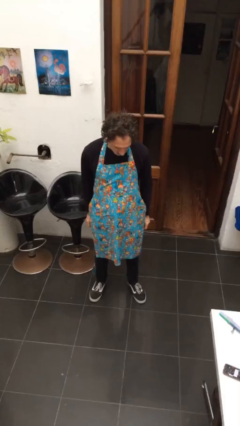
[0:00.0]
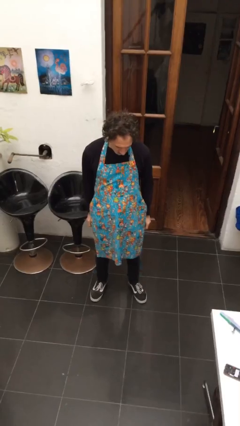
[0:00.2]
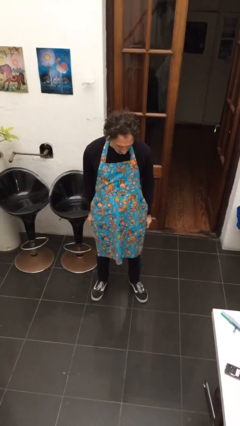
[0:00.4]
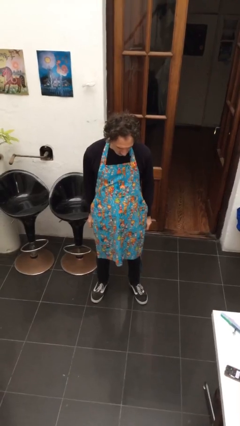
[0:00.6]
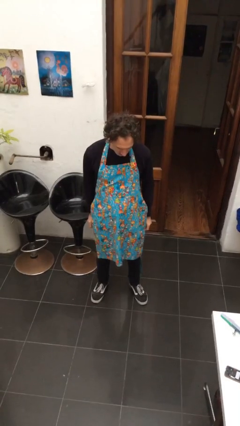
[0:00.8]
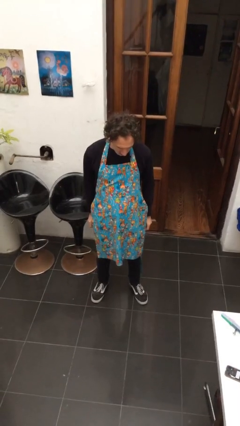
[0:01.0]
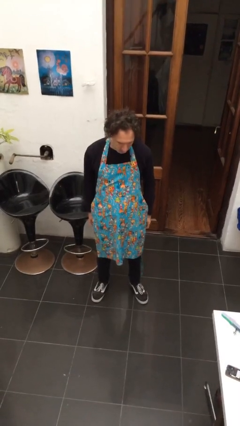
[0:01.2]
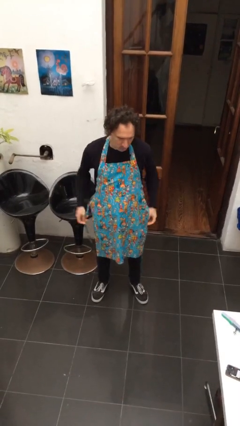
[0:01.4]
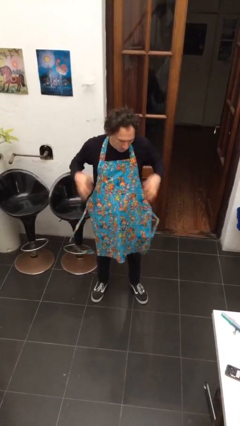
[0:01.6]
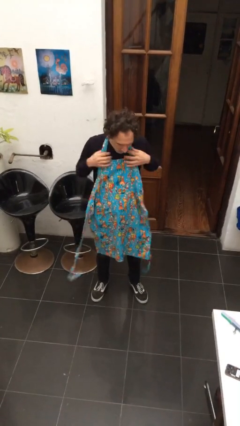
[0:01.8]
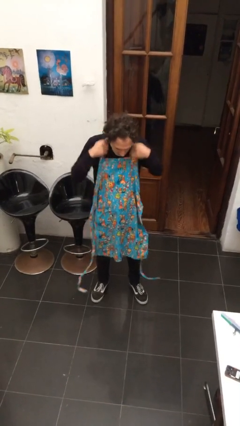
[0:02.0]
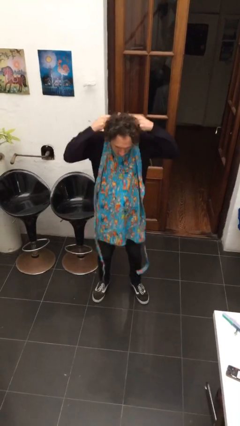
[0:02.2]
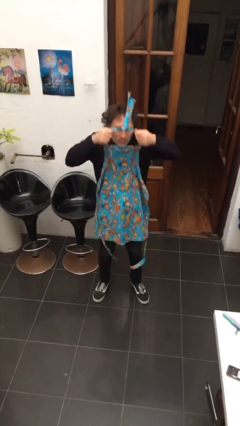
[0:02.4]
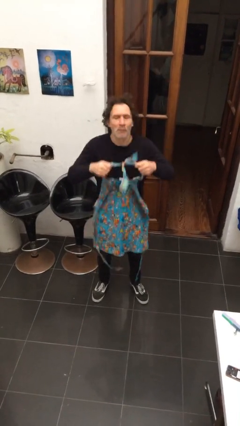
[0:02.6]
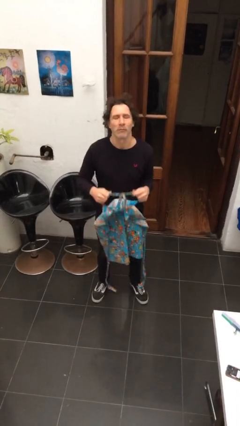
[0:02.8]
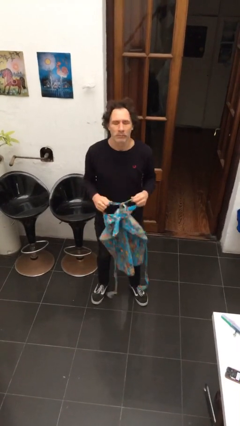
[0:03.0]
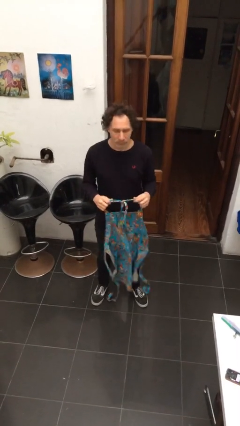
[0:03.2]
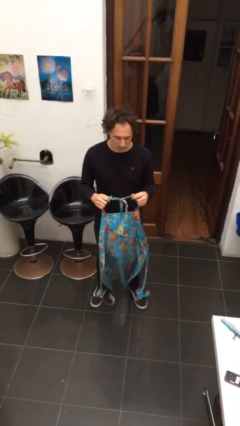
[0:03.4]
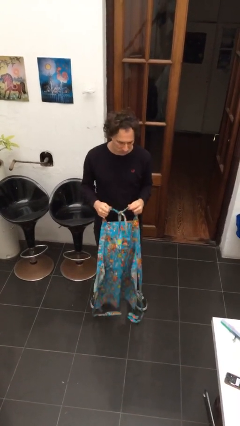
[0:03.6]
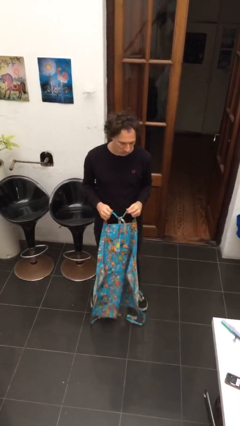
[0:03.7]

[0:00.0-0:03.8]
person takes off apron

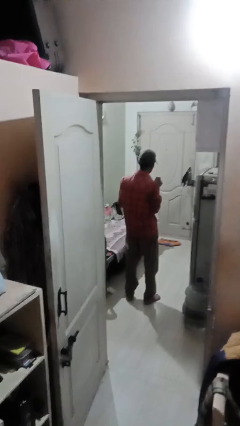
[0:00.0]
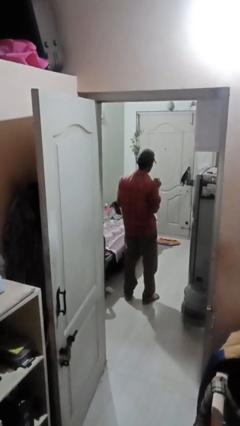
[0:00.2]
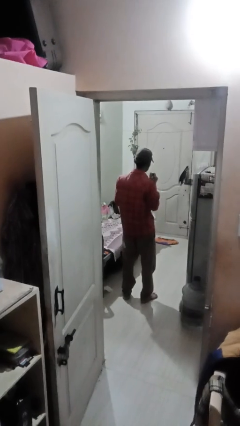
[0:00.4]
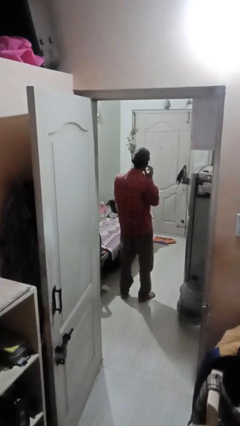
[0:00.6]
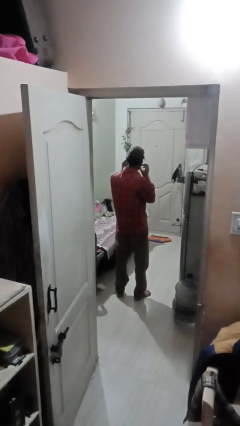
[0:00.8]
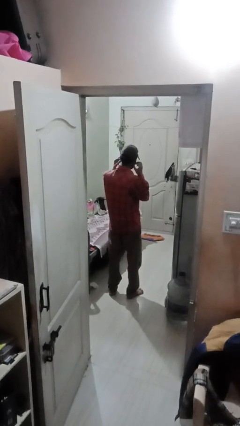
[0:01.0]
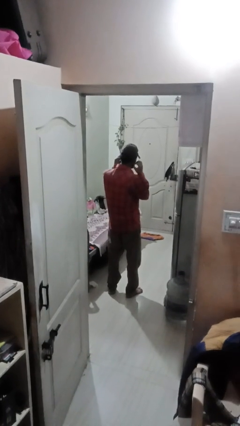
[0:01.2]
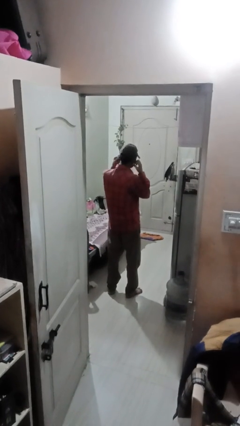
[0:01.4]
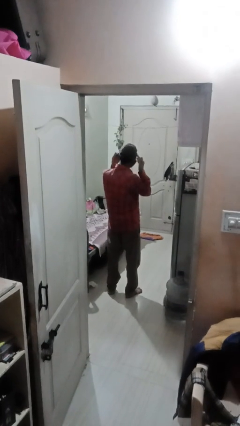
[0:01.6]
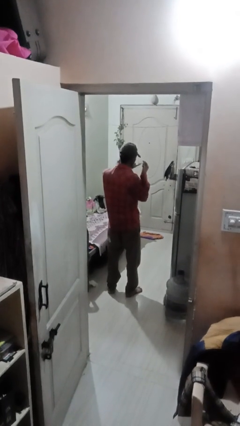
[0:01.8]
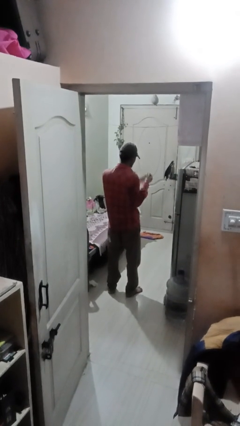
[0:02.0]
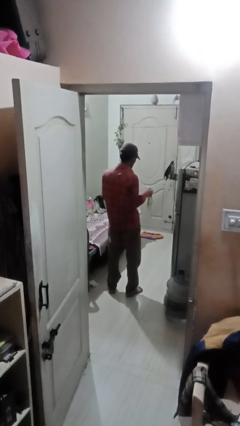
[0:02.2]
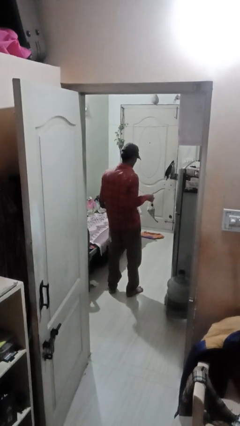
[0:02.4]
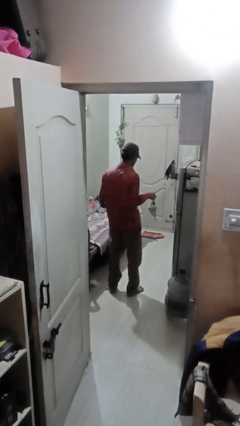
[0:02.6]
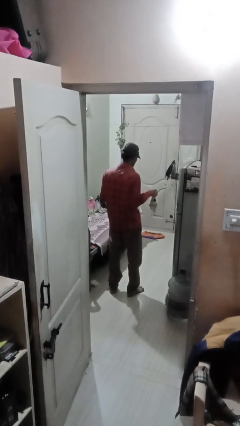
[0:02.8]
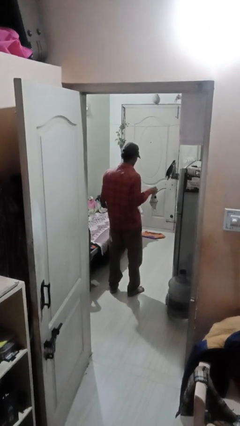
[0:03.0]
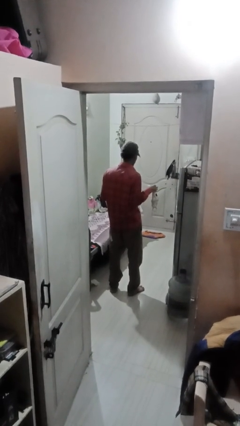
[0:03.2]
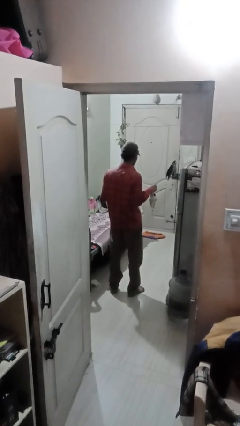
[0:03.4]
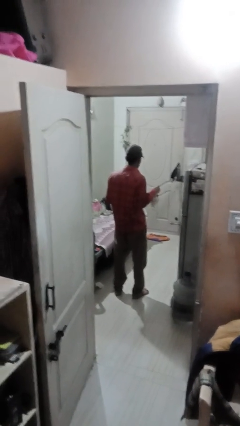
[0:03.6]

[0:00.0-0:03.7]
person takes off facemask

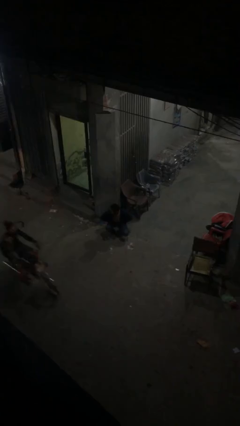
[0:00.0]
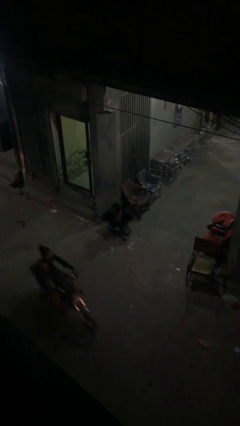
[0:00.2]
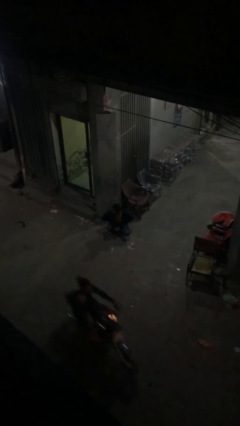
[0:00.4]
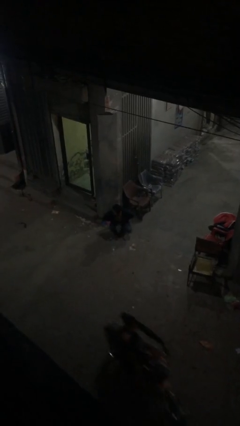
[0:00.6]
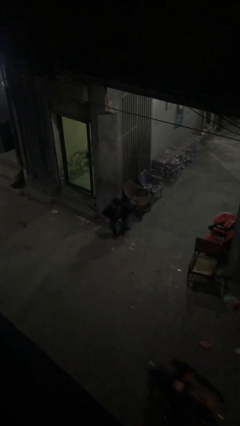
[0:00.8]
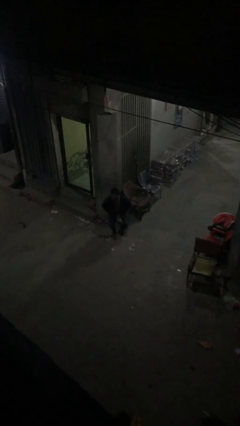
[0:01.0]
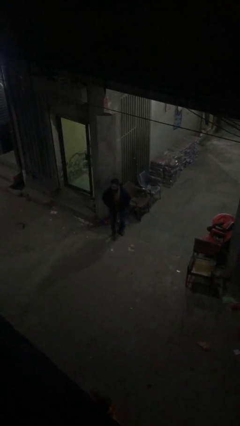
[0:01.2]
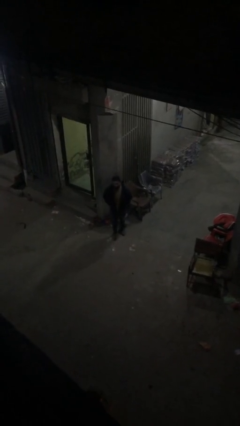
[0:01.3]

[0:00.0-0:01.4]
person stands up

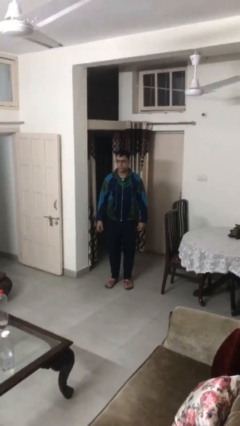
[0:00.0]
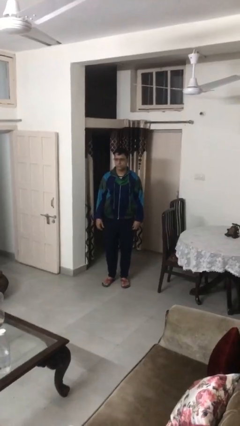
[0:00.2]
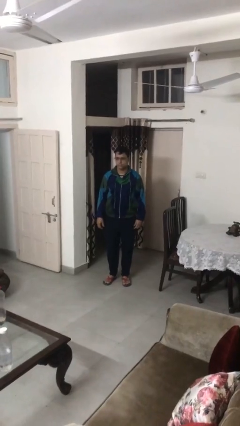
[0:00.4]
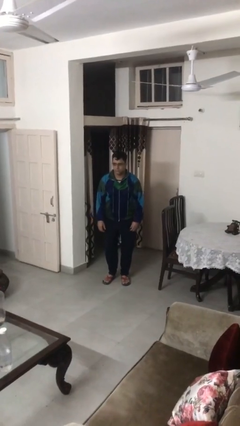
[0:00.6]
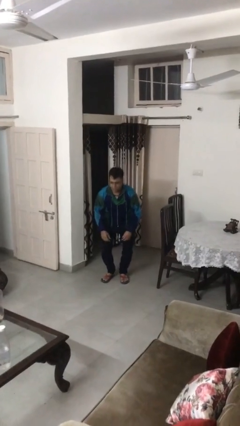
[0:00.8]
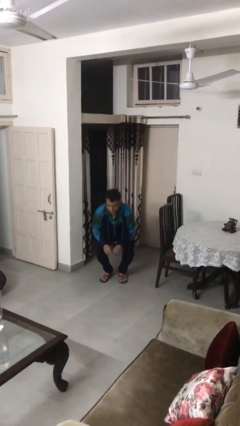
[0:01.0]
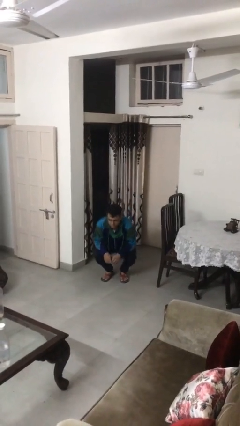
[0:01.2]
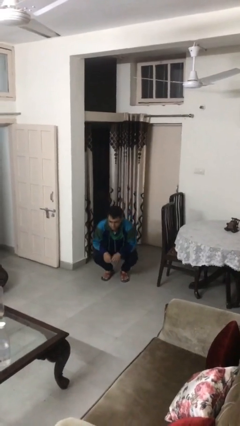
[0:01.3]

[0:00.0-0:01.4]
person sits down

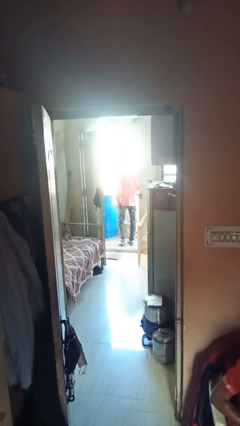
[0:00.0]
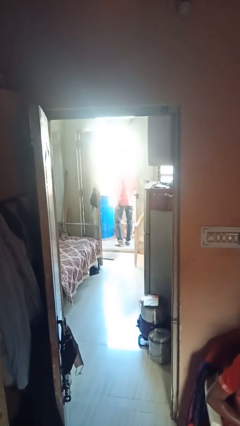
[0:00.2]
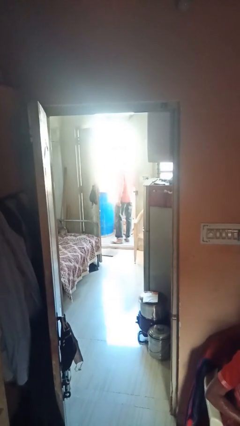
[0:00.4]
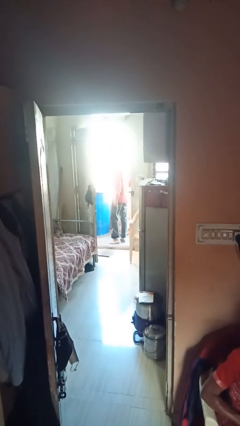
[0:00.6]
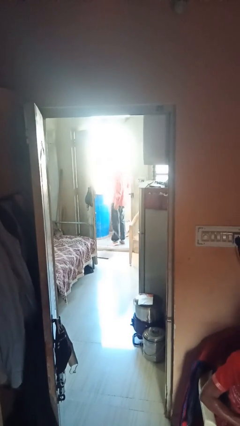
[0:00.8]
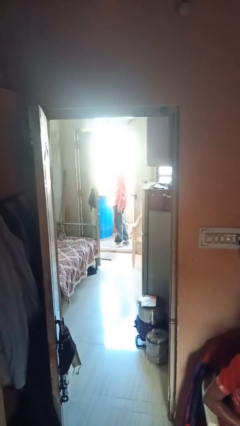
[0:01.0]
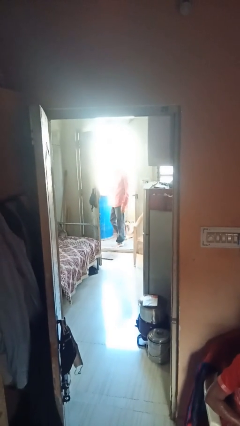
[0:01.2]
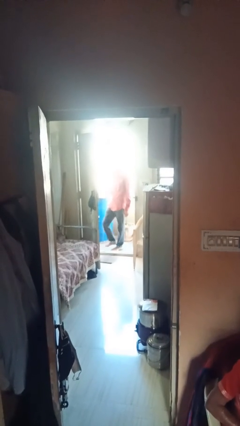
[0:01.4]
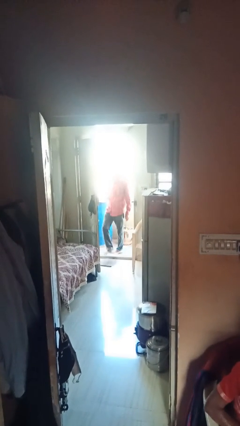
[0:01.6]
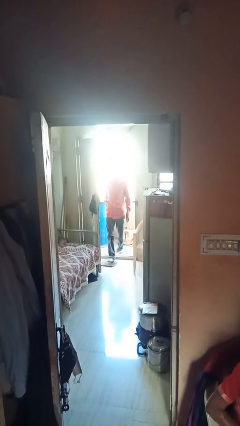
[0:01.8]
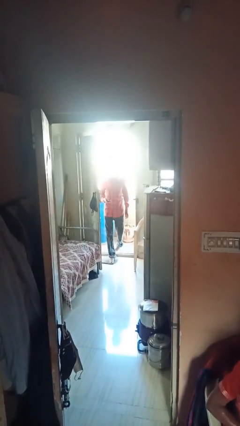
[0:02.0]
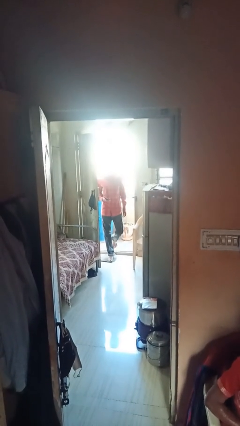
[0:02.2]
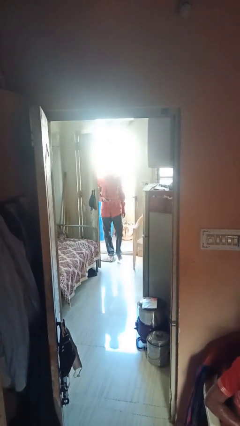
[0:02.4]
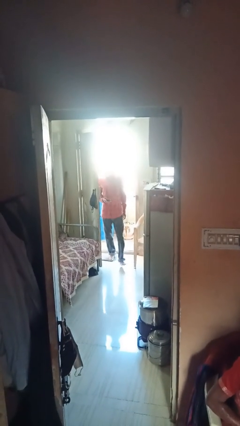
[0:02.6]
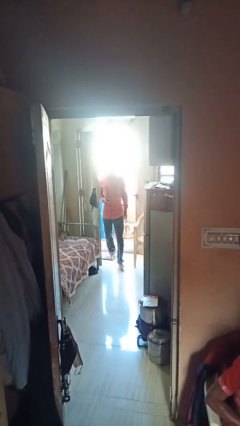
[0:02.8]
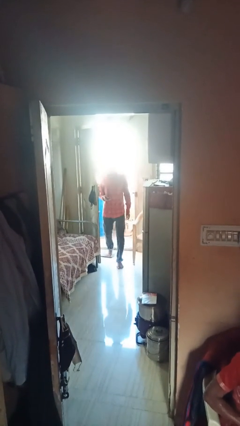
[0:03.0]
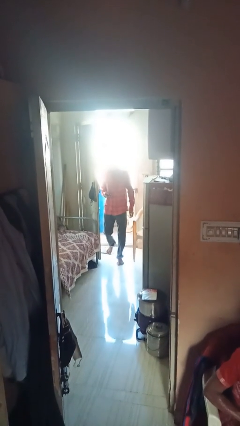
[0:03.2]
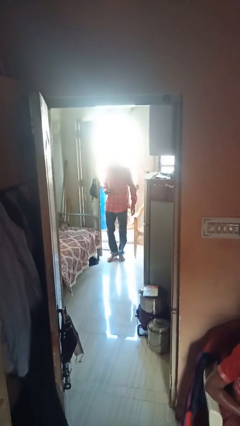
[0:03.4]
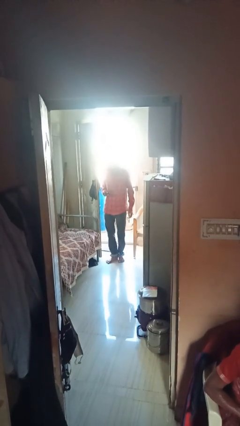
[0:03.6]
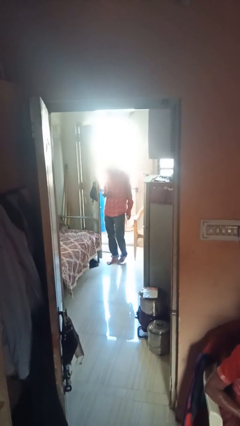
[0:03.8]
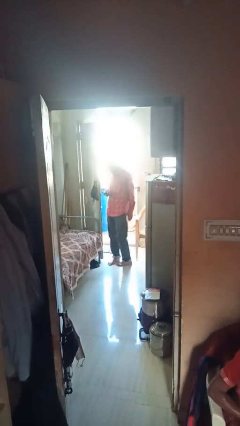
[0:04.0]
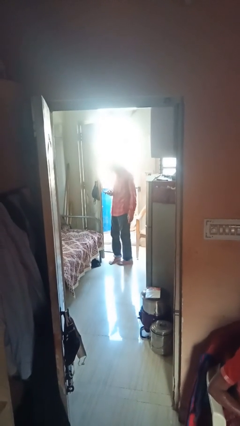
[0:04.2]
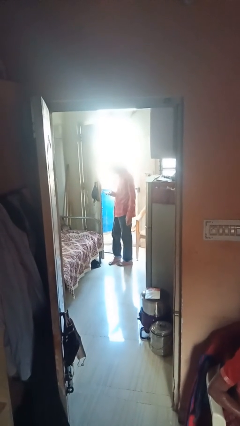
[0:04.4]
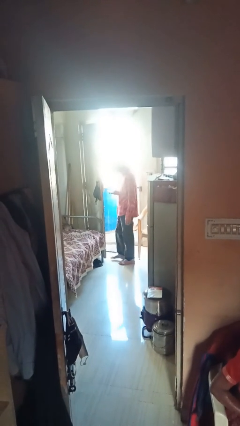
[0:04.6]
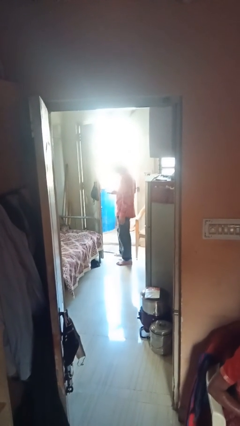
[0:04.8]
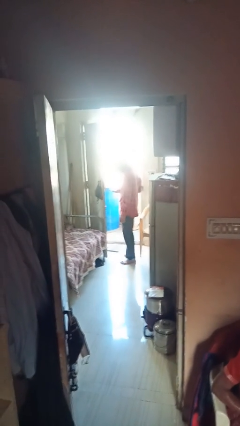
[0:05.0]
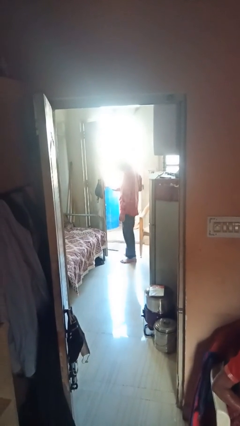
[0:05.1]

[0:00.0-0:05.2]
person enters scene through structure

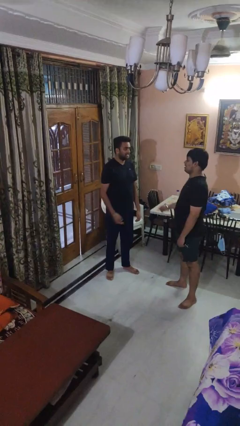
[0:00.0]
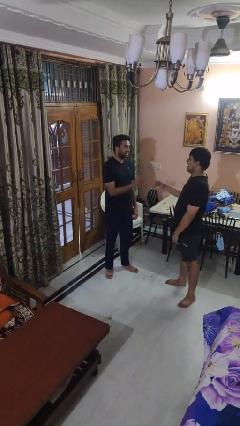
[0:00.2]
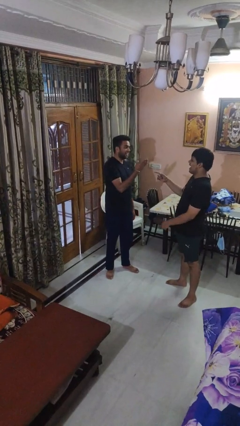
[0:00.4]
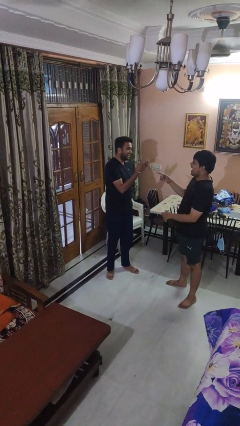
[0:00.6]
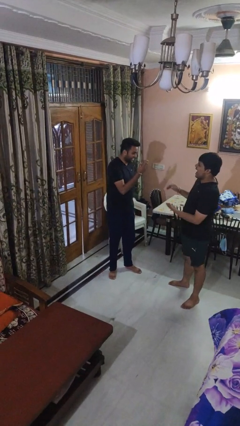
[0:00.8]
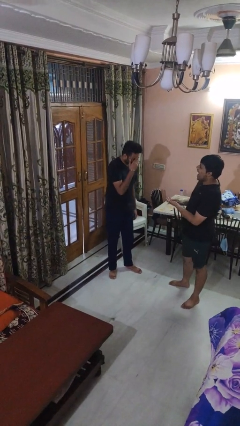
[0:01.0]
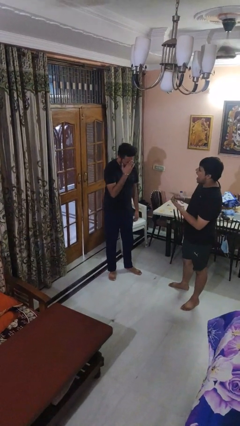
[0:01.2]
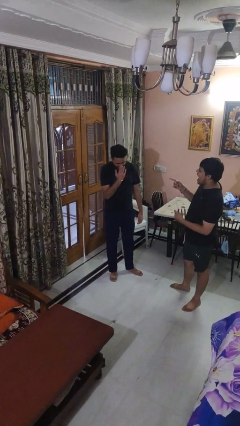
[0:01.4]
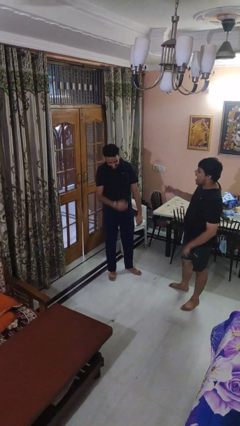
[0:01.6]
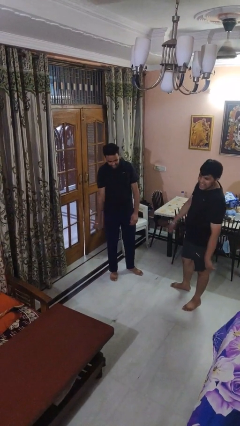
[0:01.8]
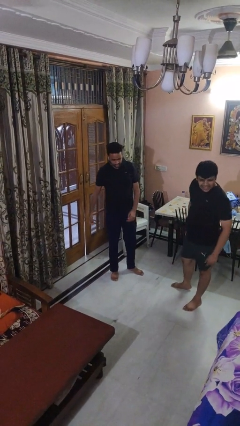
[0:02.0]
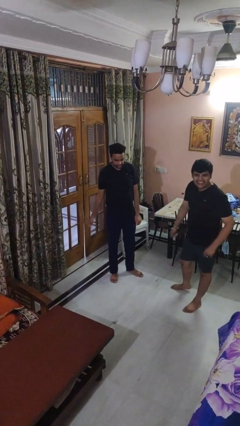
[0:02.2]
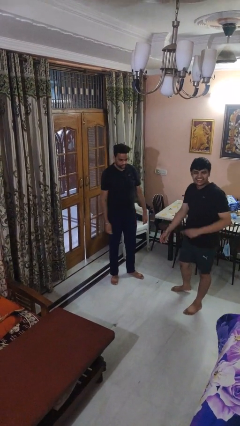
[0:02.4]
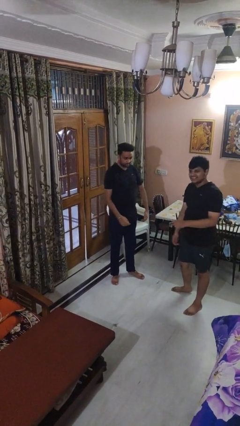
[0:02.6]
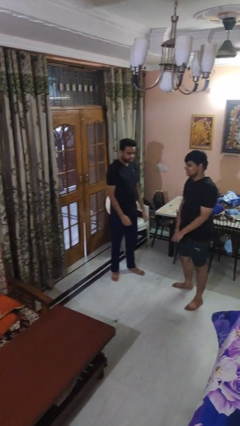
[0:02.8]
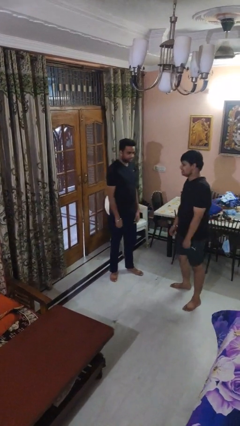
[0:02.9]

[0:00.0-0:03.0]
person laughs with person
